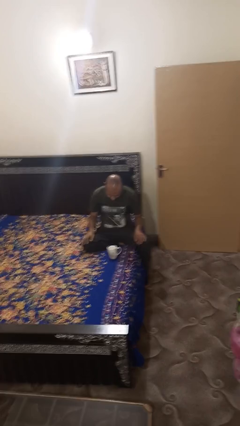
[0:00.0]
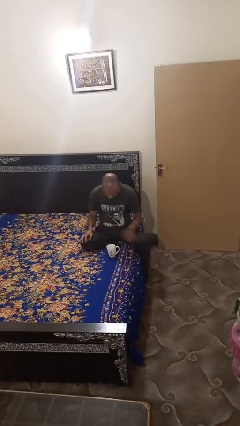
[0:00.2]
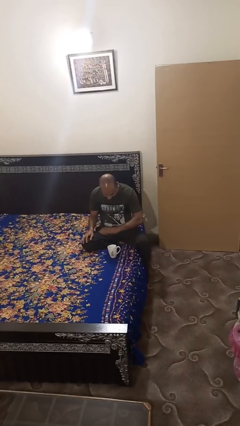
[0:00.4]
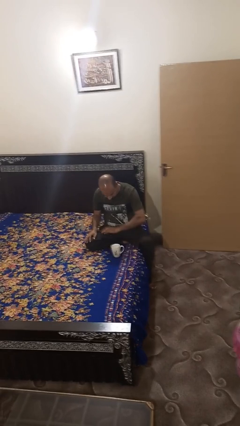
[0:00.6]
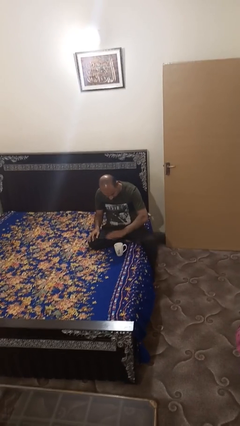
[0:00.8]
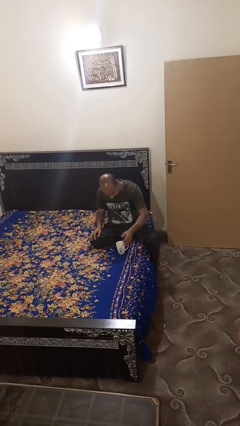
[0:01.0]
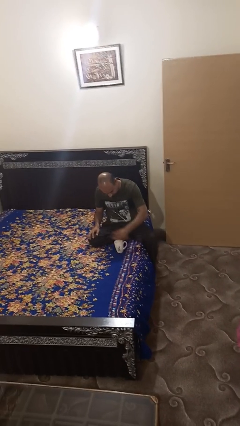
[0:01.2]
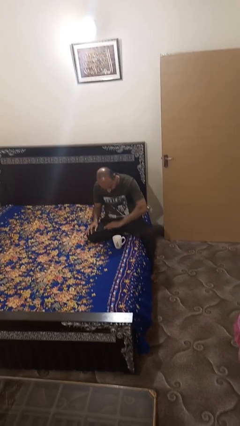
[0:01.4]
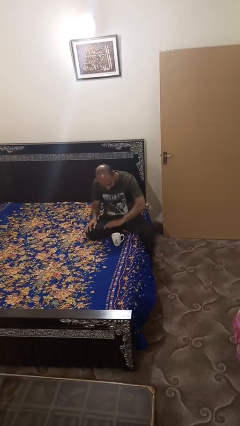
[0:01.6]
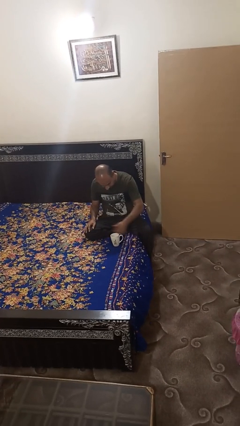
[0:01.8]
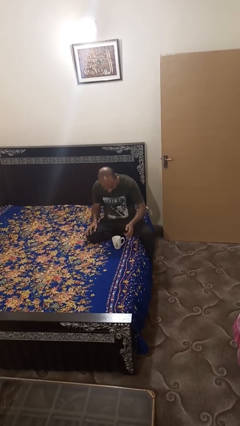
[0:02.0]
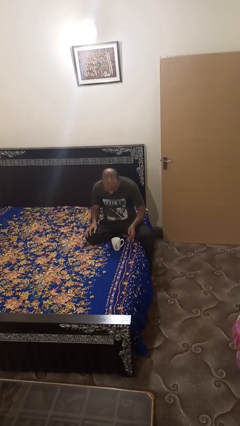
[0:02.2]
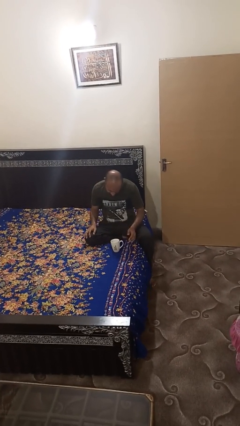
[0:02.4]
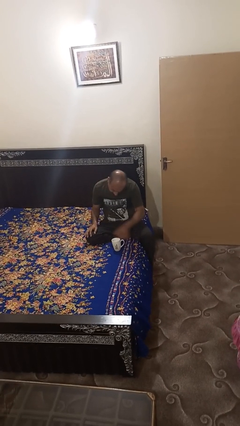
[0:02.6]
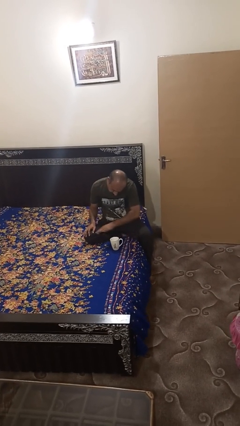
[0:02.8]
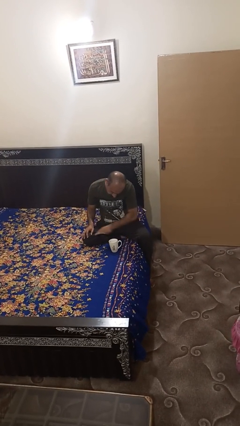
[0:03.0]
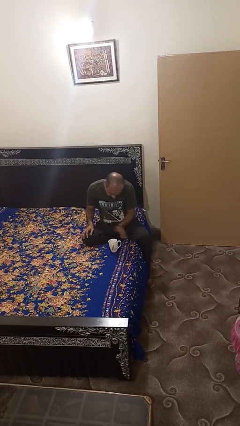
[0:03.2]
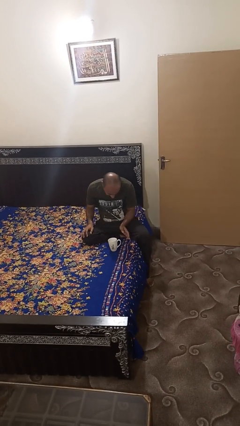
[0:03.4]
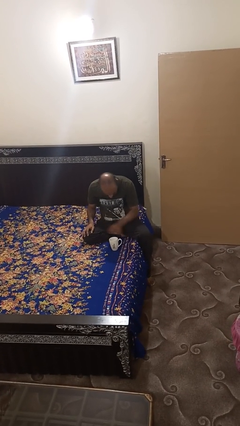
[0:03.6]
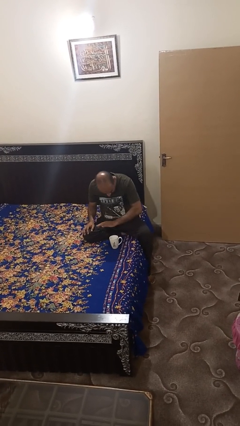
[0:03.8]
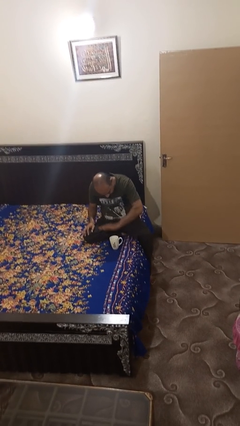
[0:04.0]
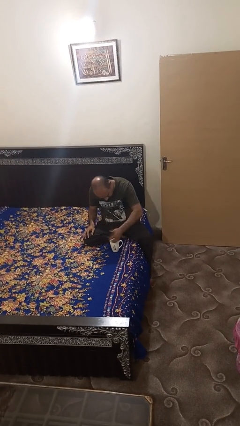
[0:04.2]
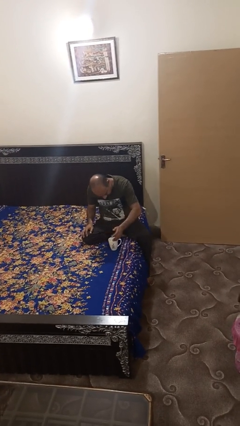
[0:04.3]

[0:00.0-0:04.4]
person waves hand over object

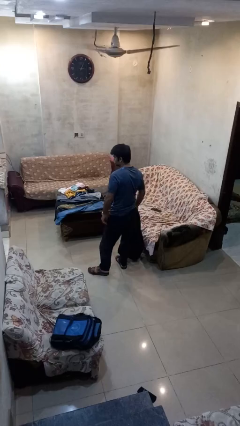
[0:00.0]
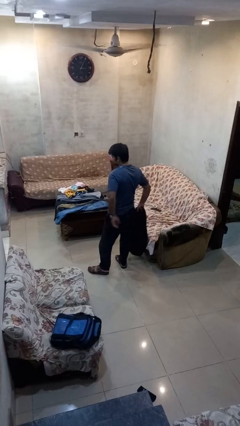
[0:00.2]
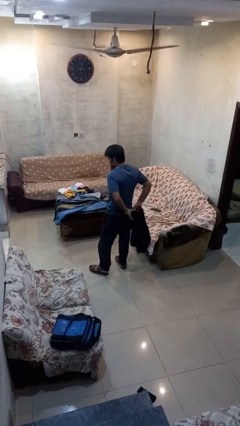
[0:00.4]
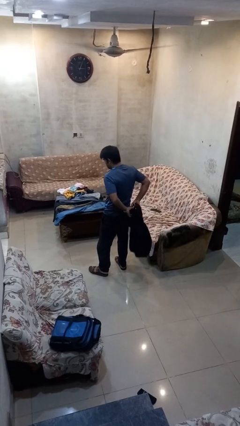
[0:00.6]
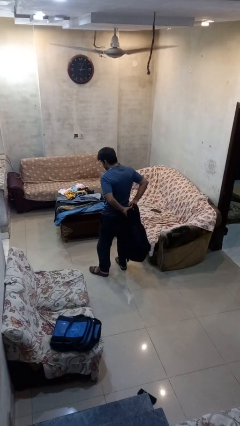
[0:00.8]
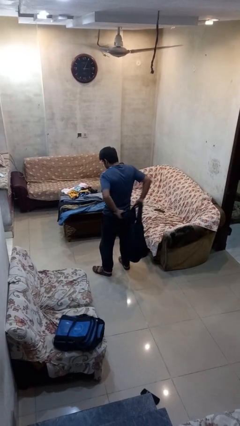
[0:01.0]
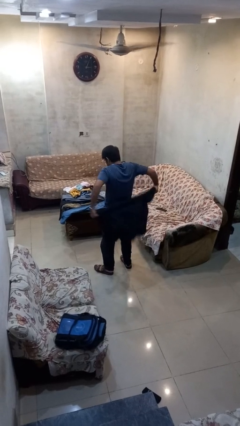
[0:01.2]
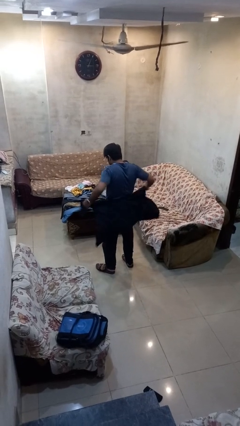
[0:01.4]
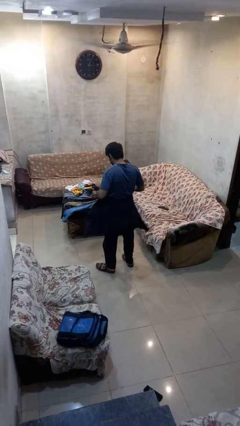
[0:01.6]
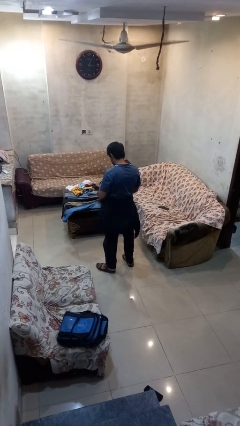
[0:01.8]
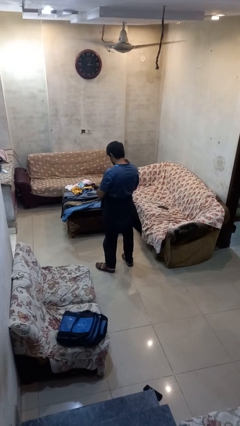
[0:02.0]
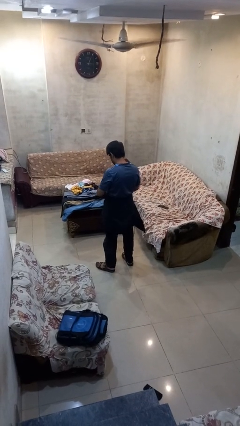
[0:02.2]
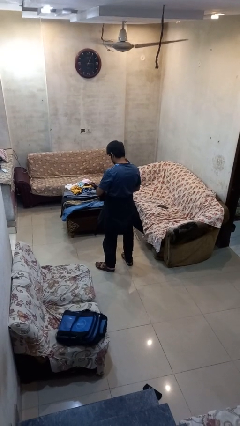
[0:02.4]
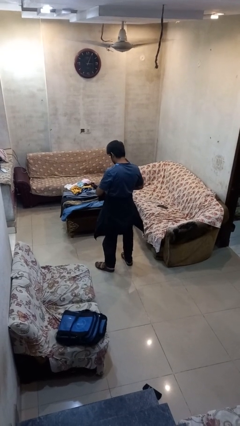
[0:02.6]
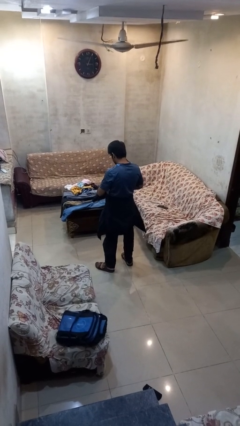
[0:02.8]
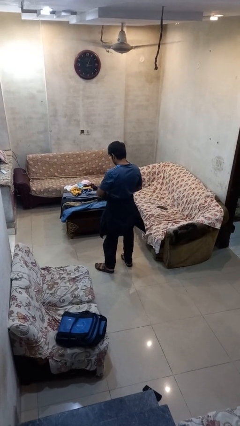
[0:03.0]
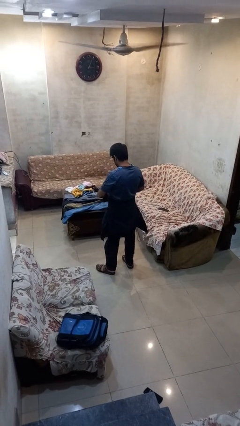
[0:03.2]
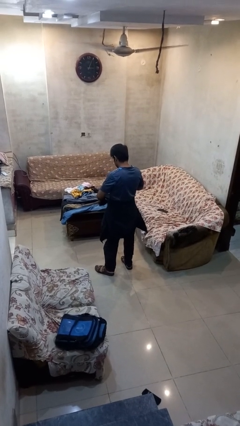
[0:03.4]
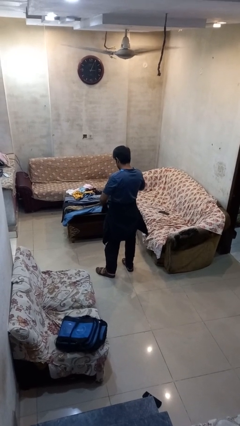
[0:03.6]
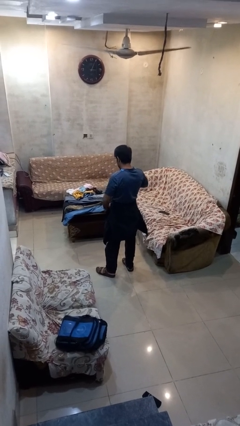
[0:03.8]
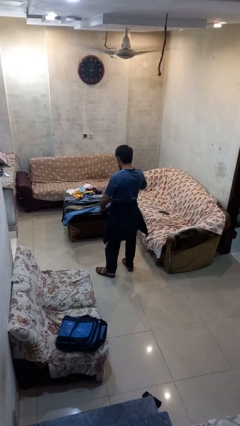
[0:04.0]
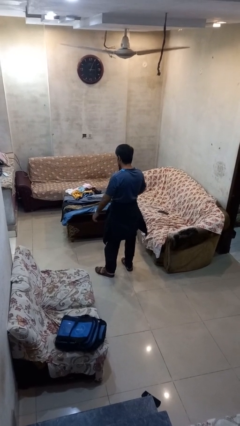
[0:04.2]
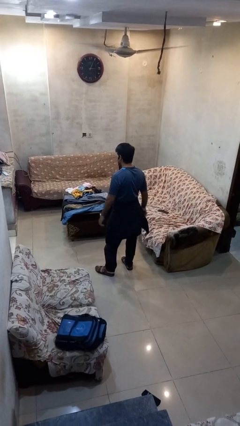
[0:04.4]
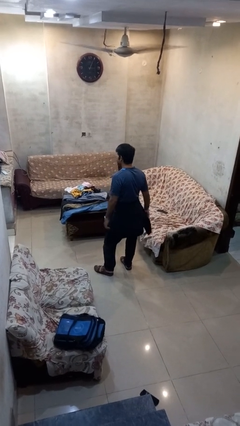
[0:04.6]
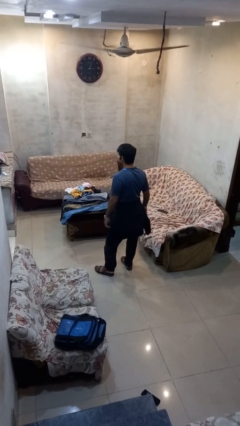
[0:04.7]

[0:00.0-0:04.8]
person ties jacket around waist

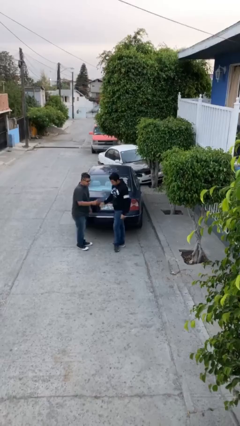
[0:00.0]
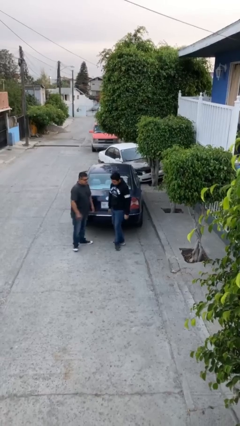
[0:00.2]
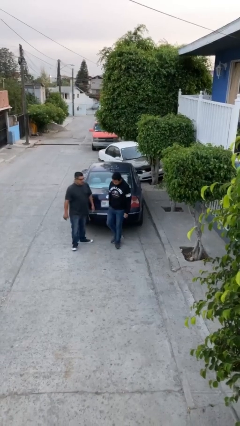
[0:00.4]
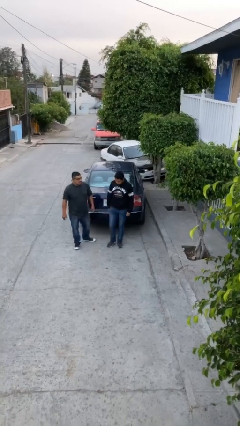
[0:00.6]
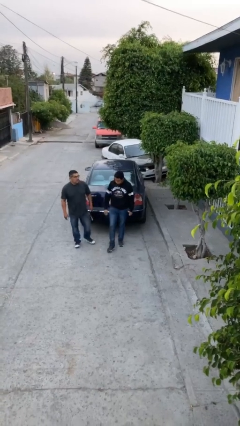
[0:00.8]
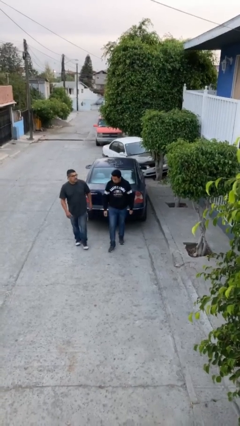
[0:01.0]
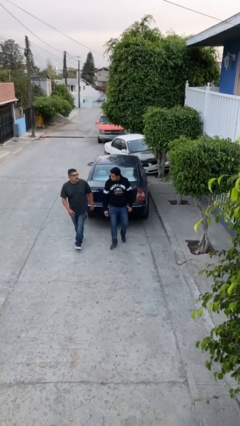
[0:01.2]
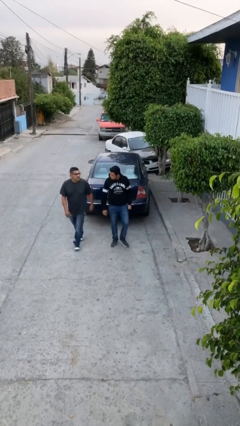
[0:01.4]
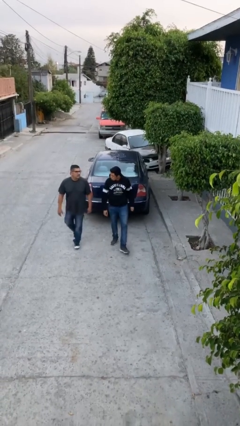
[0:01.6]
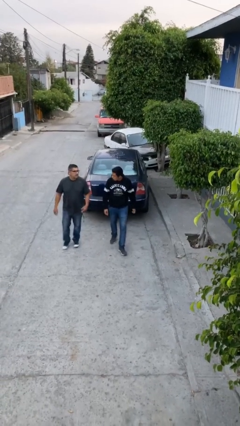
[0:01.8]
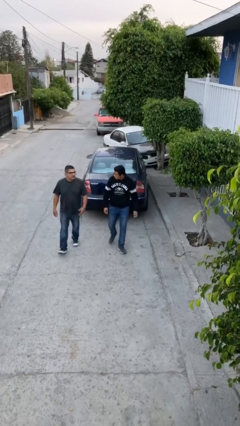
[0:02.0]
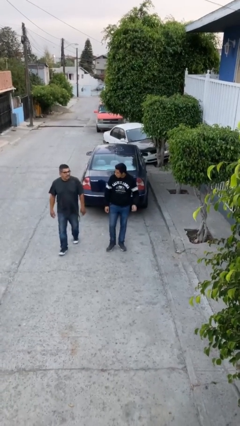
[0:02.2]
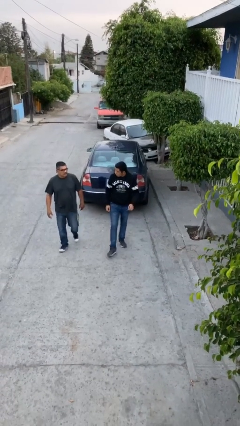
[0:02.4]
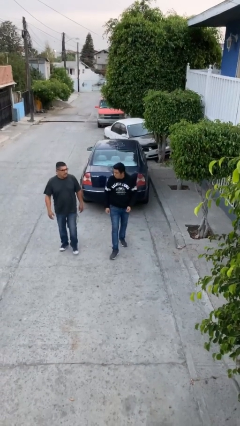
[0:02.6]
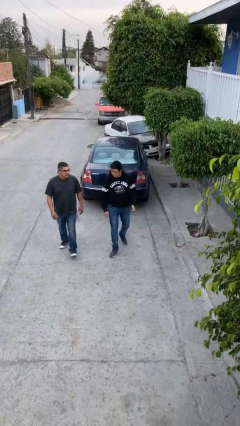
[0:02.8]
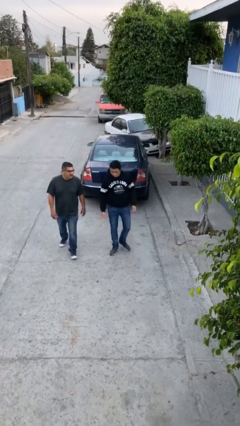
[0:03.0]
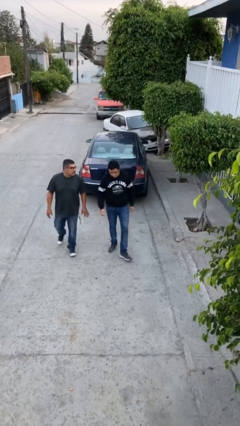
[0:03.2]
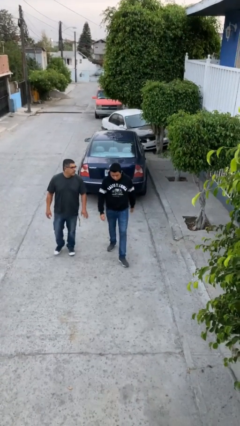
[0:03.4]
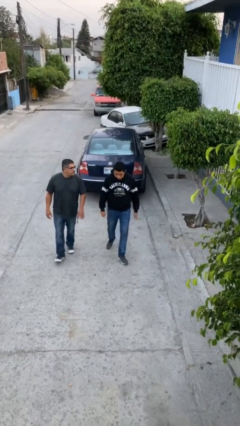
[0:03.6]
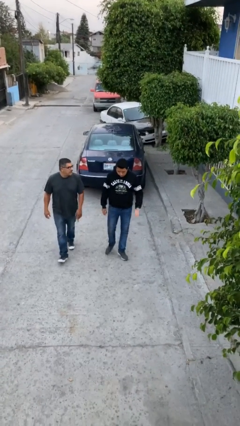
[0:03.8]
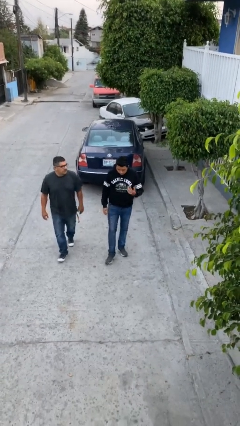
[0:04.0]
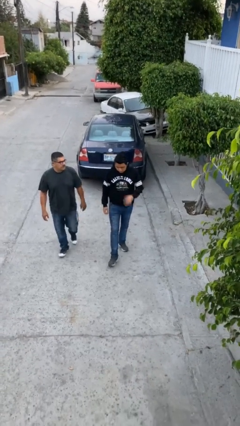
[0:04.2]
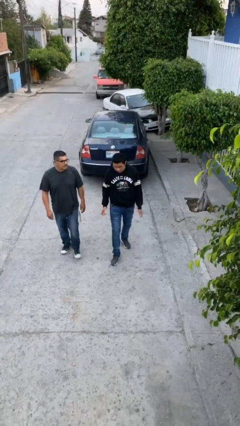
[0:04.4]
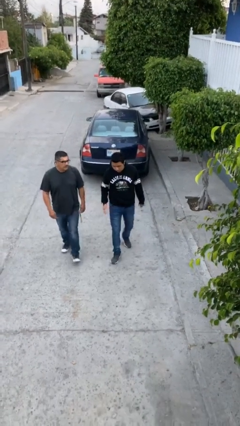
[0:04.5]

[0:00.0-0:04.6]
person talks to person

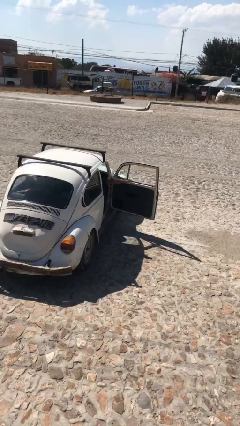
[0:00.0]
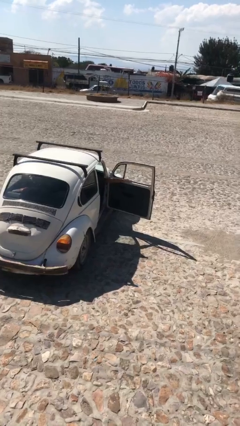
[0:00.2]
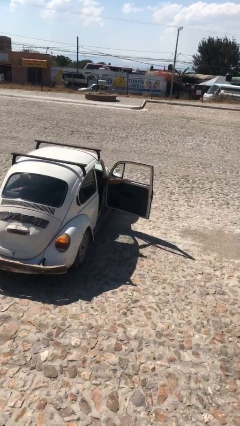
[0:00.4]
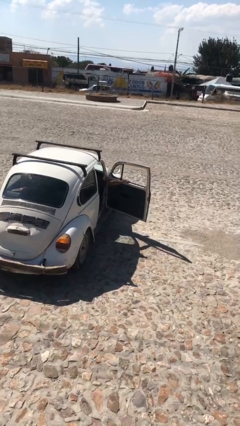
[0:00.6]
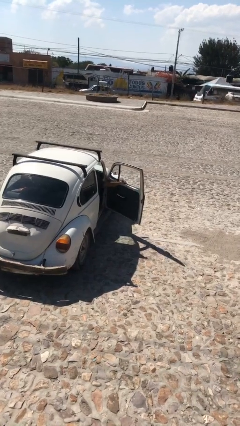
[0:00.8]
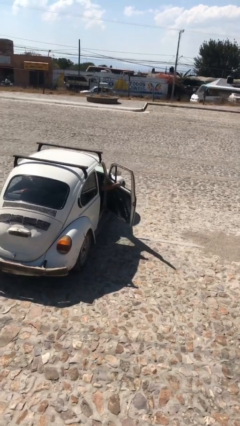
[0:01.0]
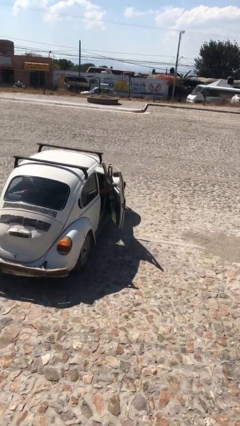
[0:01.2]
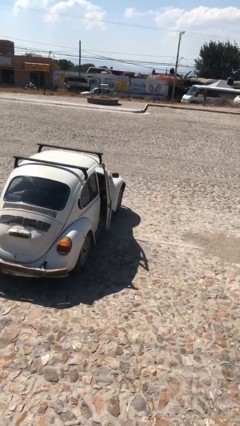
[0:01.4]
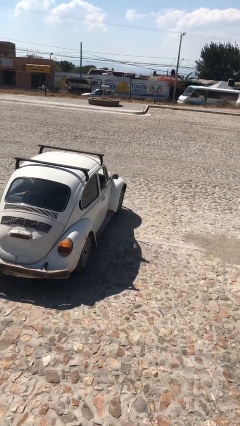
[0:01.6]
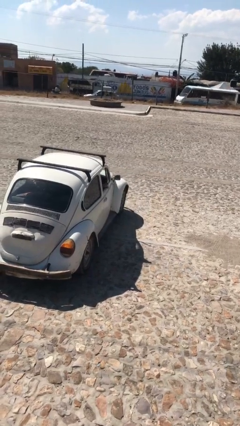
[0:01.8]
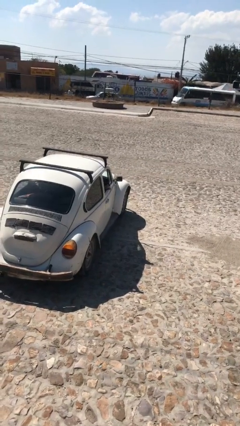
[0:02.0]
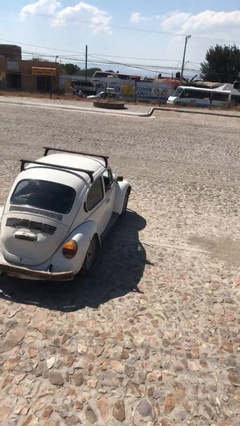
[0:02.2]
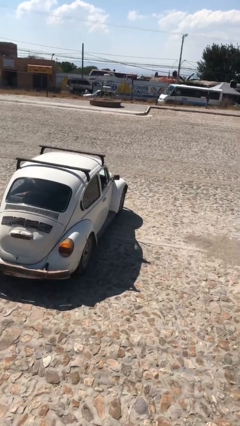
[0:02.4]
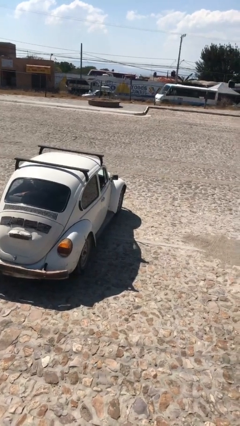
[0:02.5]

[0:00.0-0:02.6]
person closes car door

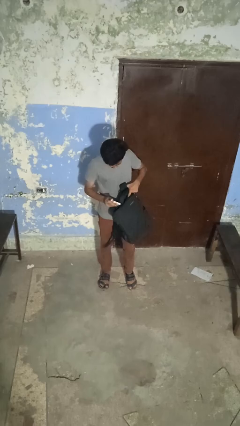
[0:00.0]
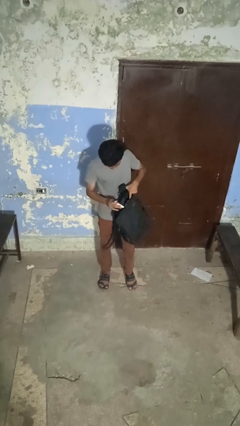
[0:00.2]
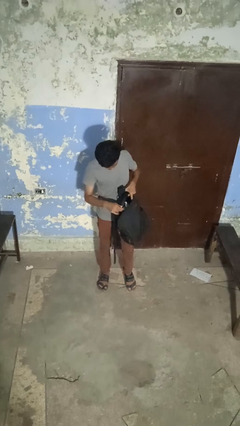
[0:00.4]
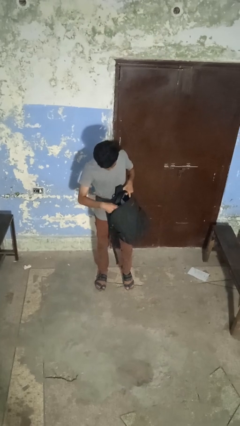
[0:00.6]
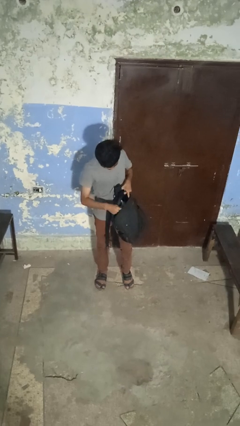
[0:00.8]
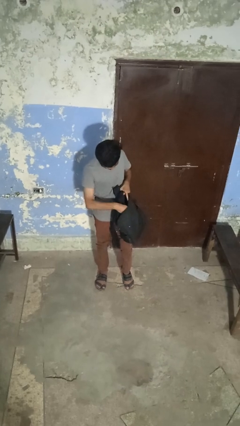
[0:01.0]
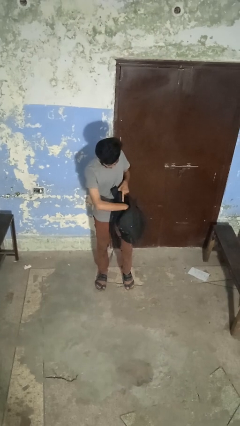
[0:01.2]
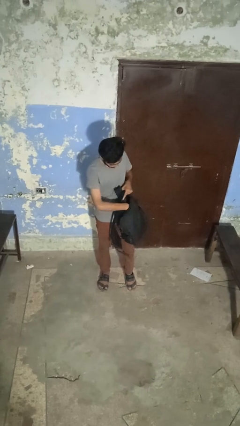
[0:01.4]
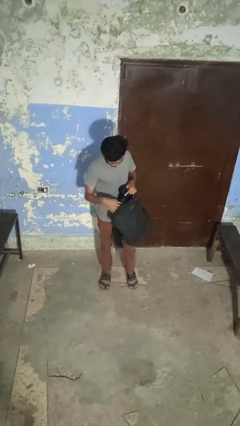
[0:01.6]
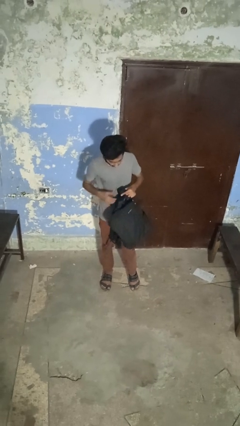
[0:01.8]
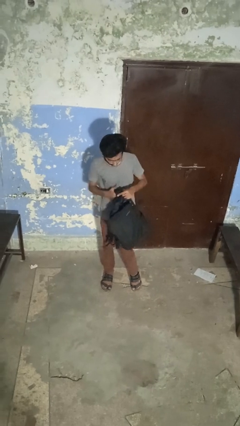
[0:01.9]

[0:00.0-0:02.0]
person puts object into backpack
